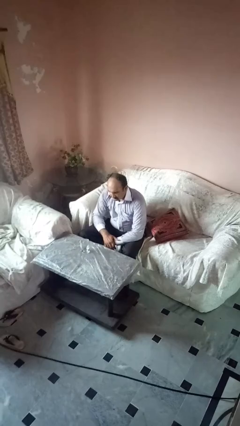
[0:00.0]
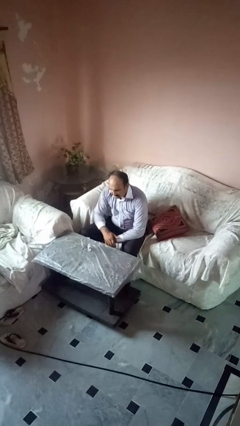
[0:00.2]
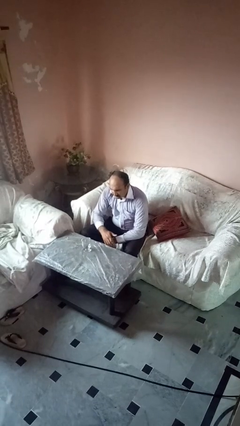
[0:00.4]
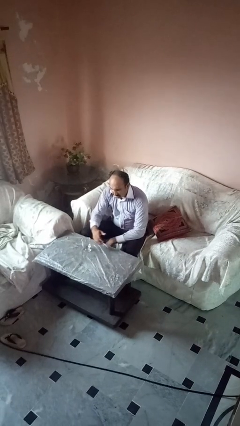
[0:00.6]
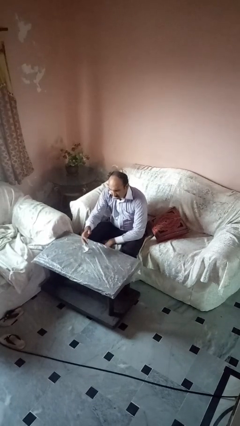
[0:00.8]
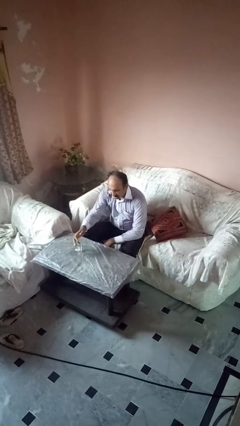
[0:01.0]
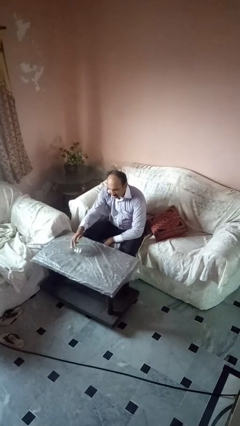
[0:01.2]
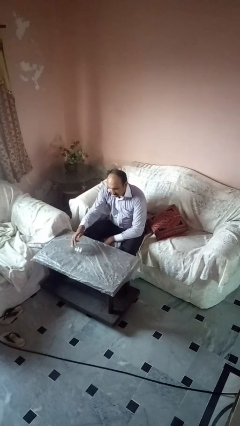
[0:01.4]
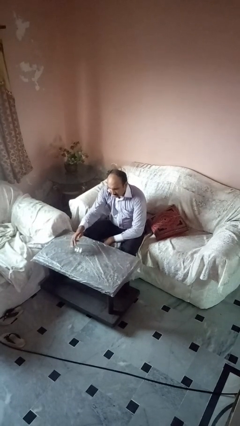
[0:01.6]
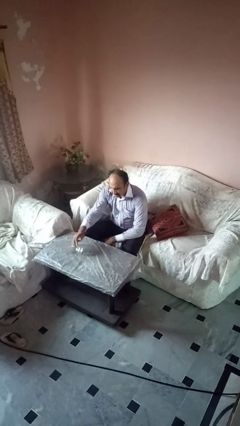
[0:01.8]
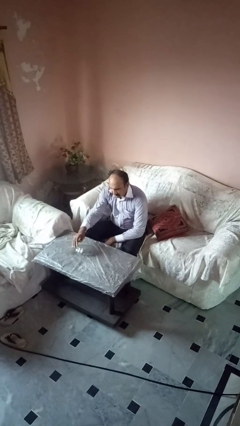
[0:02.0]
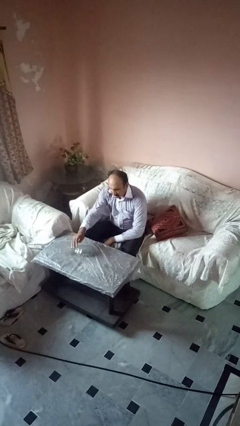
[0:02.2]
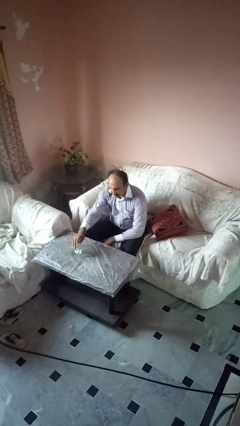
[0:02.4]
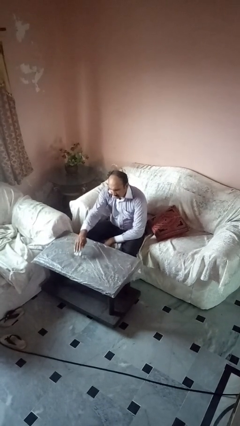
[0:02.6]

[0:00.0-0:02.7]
person spills on table

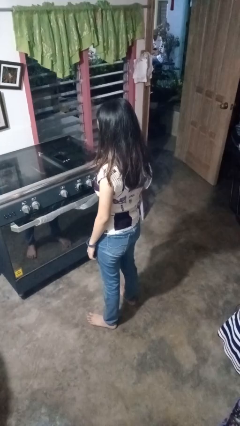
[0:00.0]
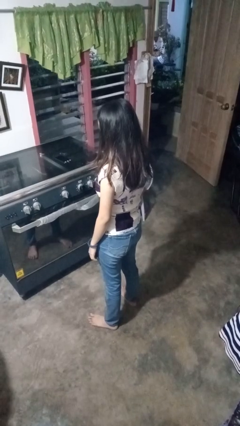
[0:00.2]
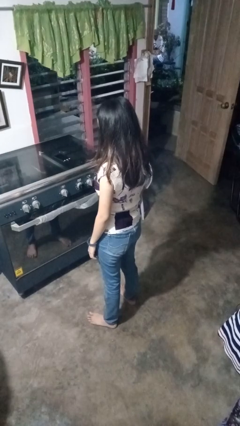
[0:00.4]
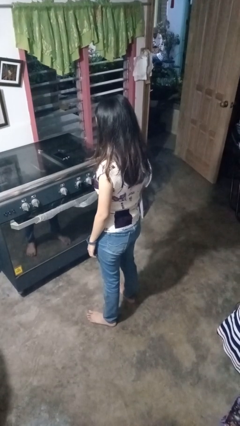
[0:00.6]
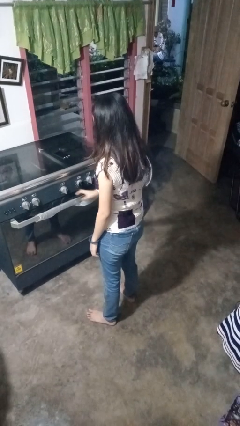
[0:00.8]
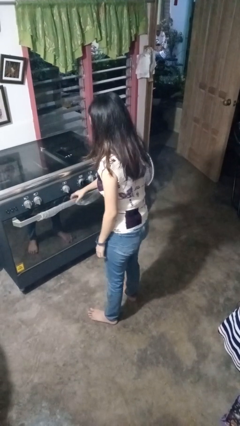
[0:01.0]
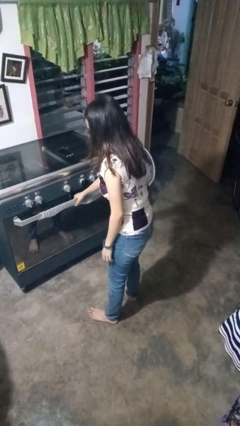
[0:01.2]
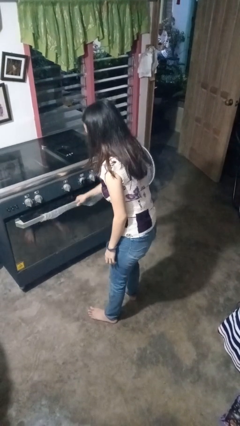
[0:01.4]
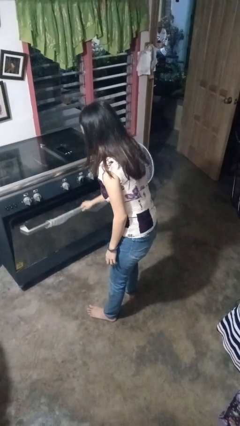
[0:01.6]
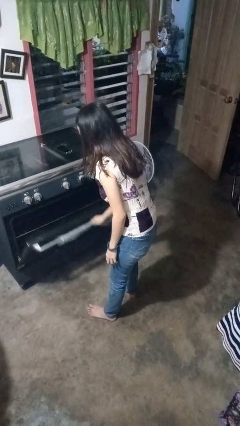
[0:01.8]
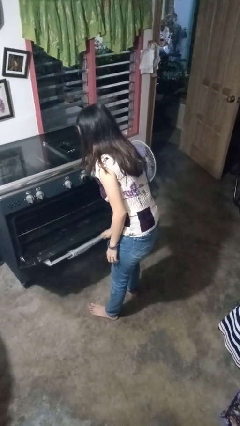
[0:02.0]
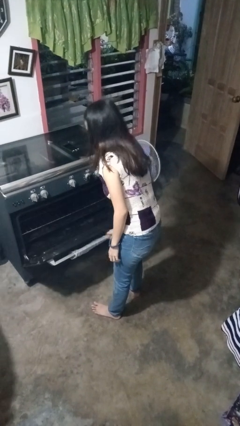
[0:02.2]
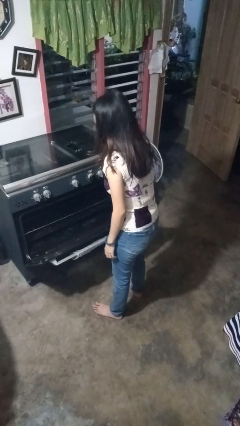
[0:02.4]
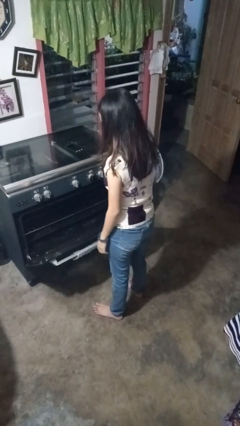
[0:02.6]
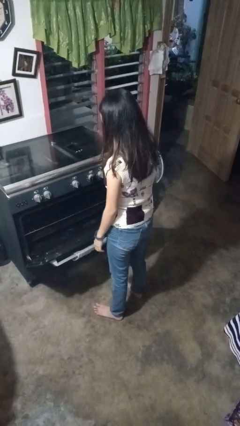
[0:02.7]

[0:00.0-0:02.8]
person opens oven door

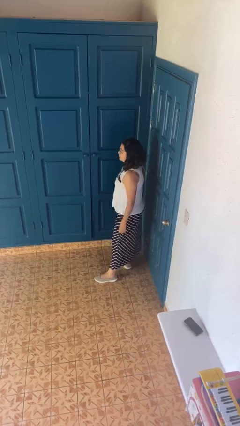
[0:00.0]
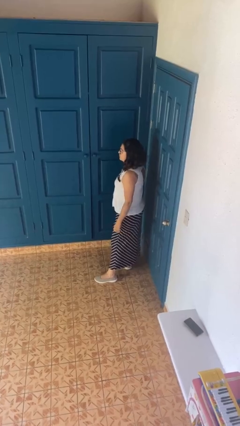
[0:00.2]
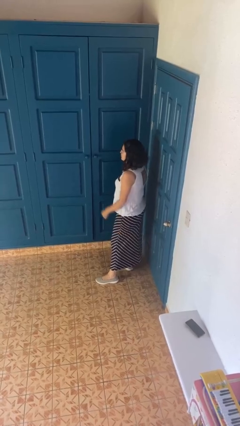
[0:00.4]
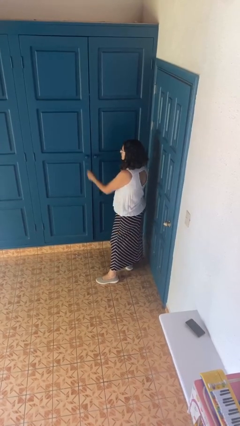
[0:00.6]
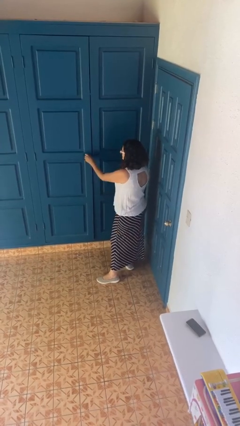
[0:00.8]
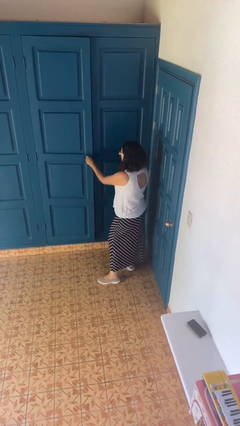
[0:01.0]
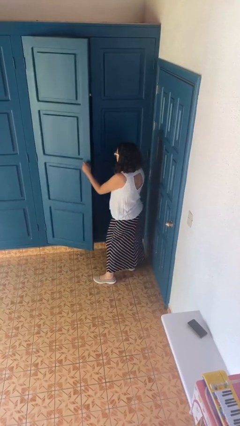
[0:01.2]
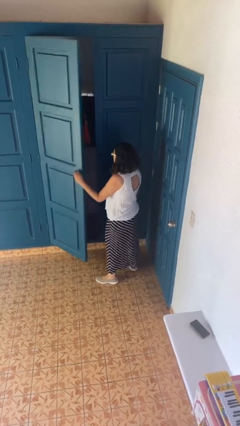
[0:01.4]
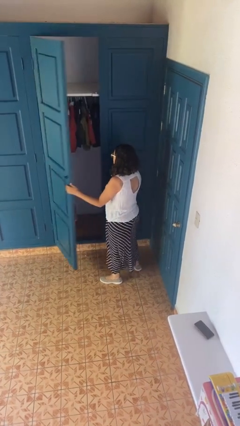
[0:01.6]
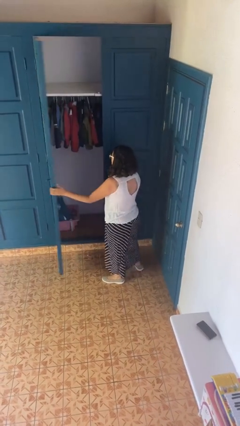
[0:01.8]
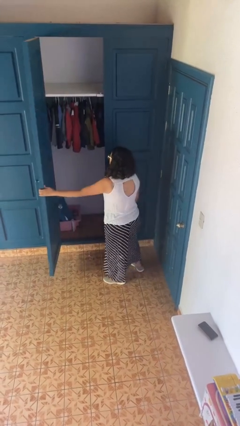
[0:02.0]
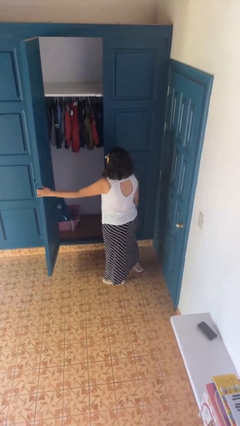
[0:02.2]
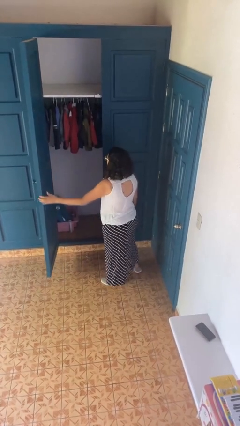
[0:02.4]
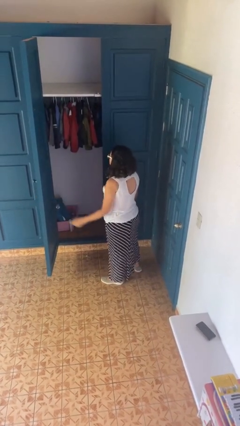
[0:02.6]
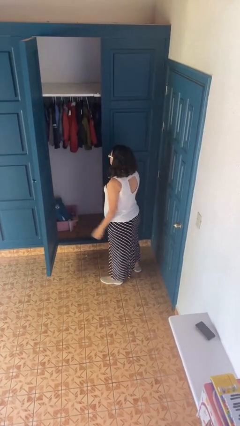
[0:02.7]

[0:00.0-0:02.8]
person opens closet door

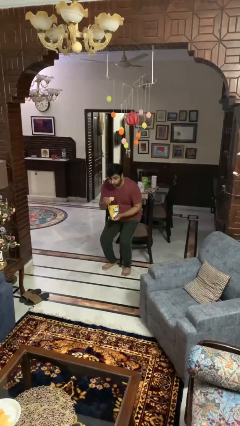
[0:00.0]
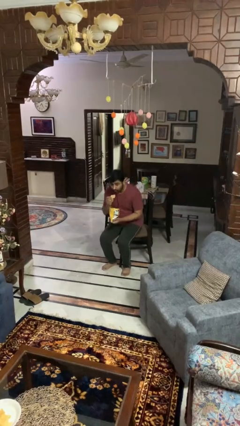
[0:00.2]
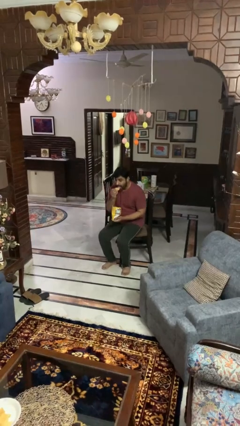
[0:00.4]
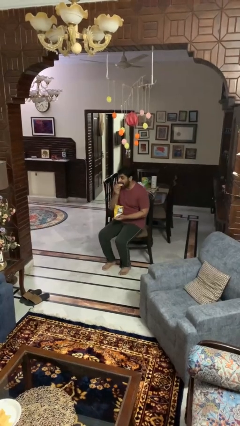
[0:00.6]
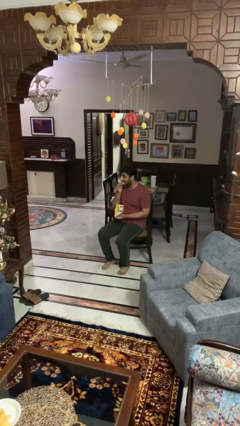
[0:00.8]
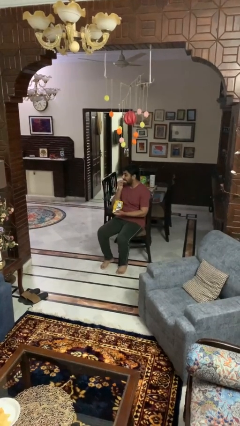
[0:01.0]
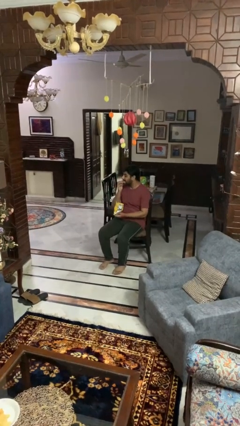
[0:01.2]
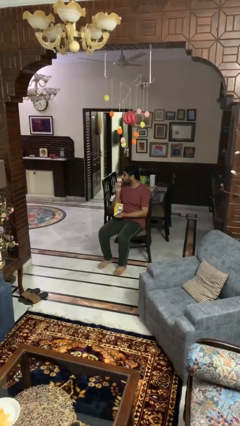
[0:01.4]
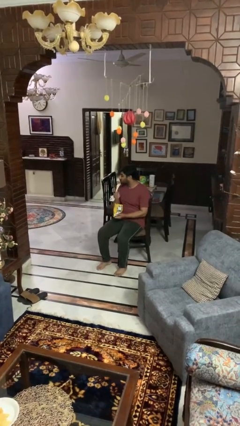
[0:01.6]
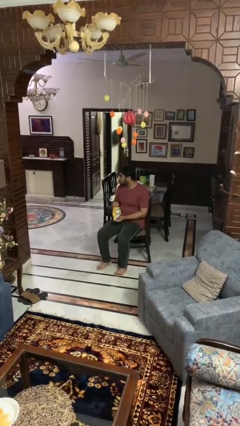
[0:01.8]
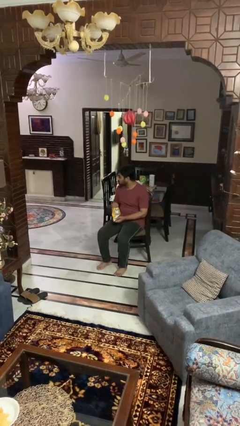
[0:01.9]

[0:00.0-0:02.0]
person eats snack from bag

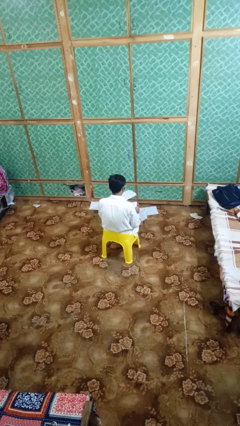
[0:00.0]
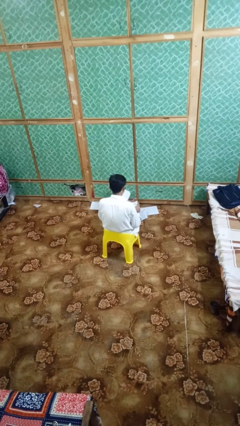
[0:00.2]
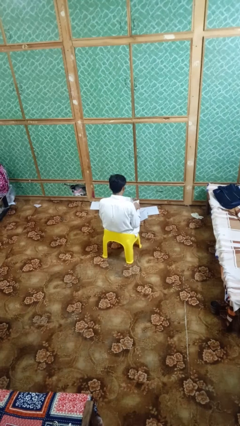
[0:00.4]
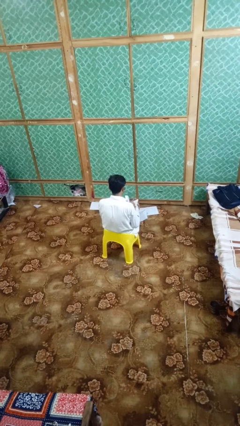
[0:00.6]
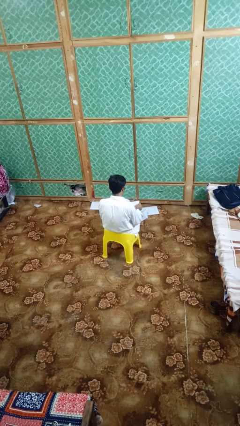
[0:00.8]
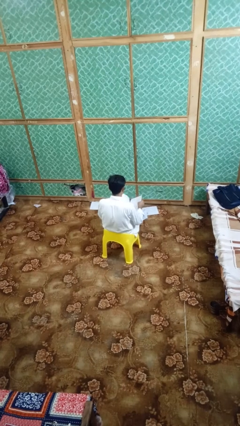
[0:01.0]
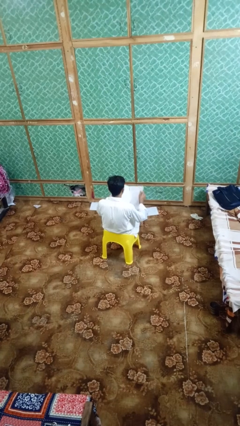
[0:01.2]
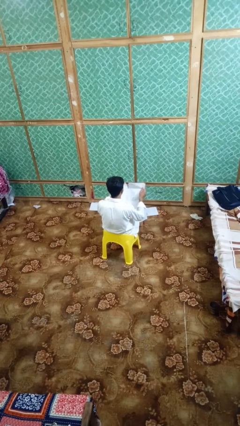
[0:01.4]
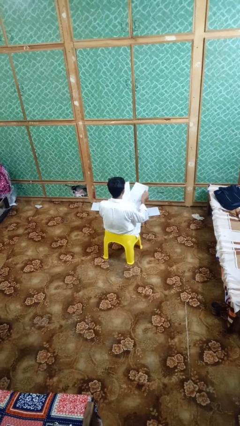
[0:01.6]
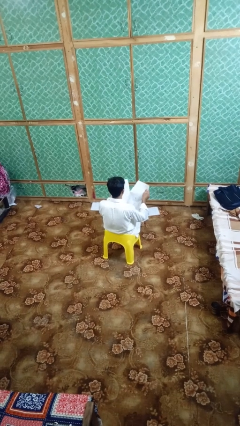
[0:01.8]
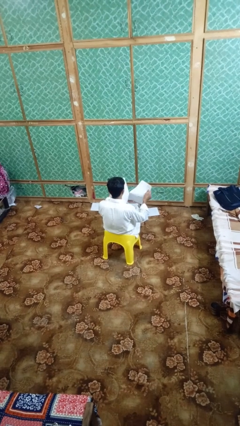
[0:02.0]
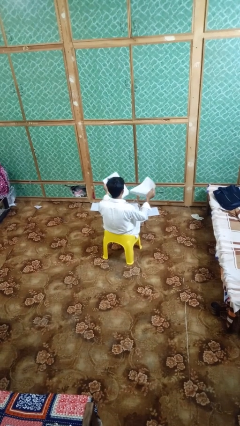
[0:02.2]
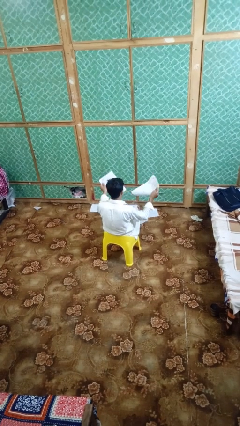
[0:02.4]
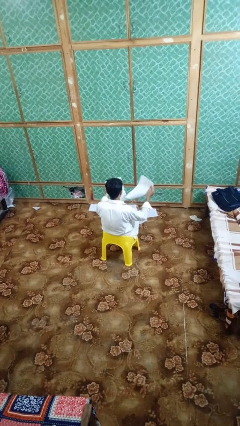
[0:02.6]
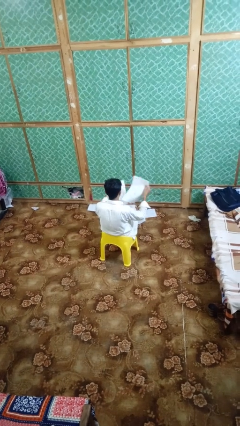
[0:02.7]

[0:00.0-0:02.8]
person tears paper

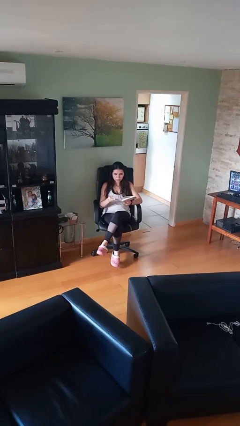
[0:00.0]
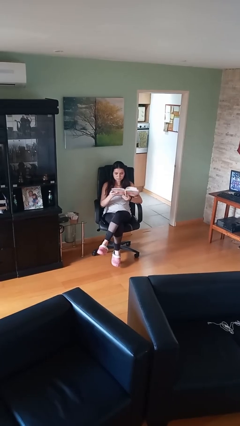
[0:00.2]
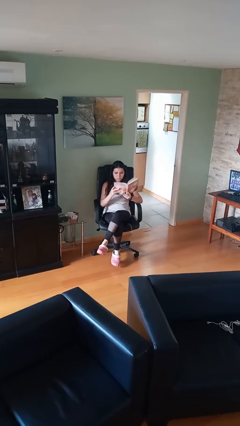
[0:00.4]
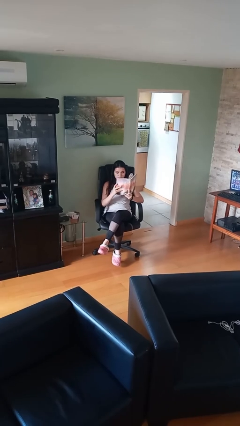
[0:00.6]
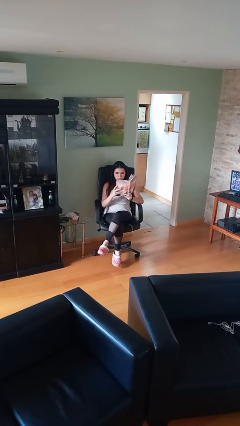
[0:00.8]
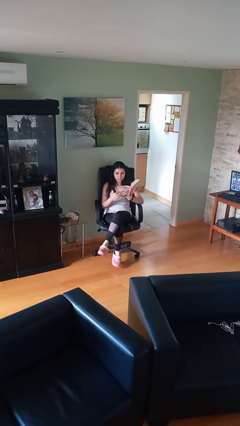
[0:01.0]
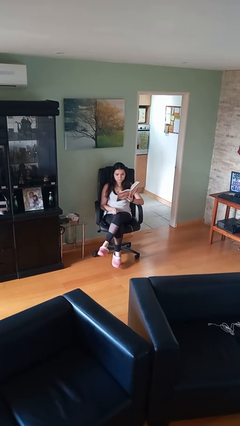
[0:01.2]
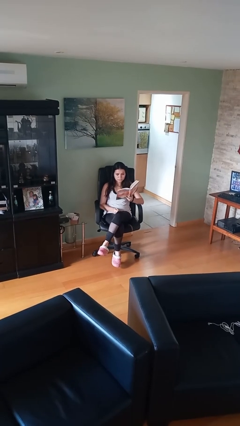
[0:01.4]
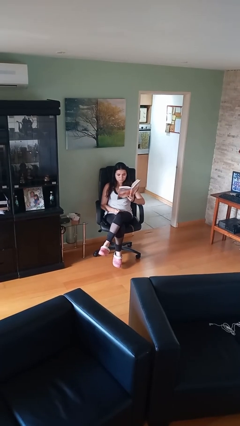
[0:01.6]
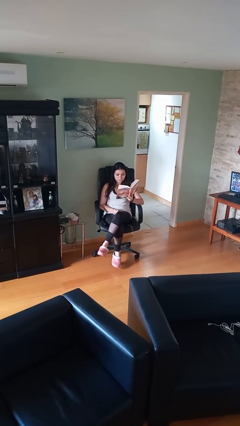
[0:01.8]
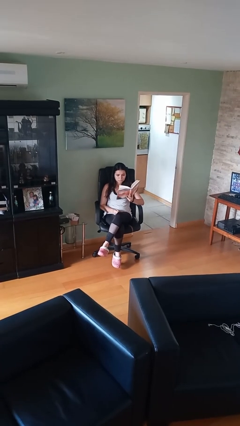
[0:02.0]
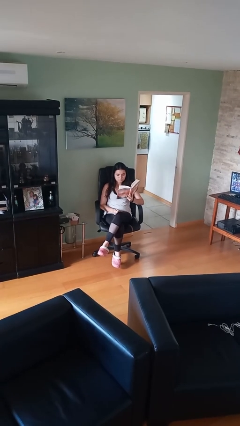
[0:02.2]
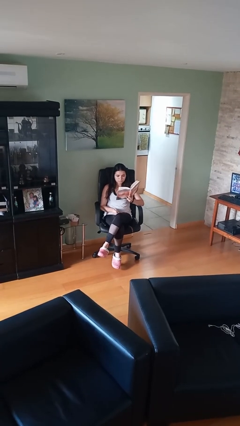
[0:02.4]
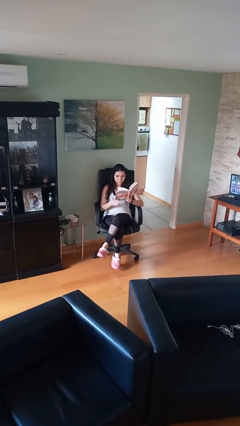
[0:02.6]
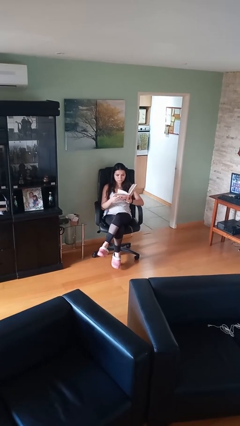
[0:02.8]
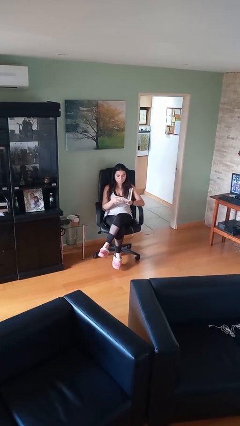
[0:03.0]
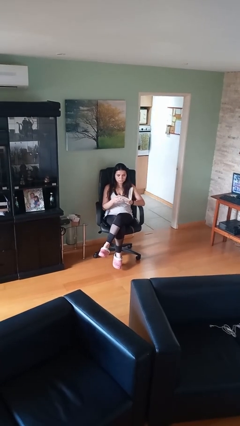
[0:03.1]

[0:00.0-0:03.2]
person reads document

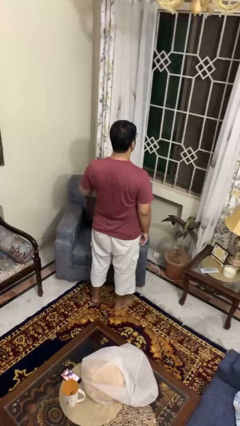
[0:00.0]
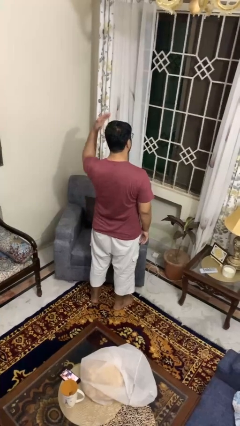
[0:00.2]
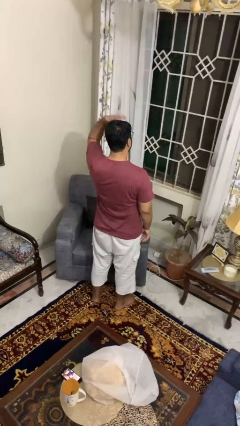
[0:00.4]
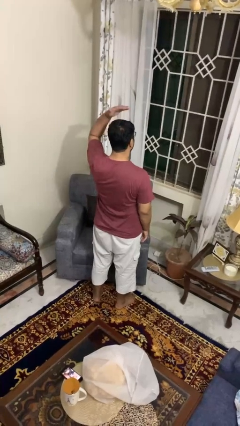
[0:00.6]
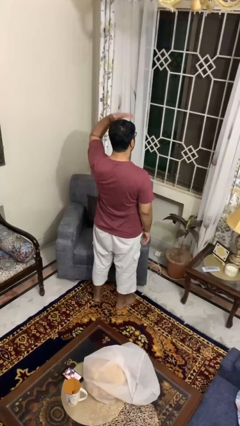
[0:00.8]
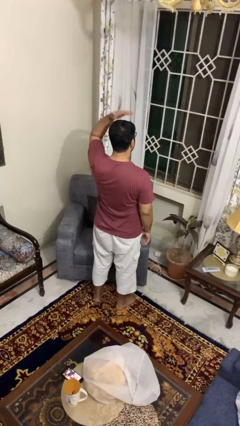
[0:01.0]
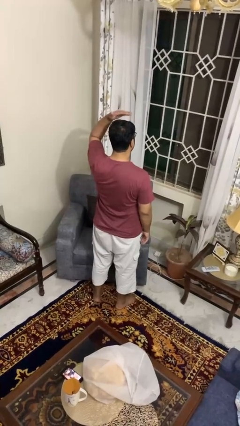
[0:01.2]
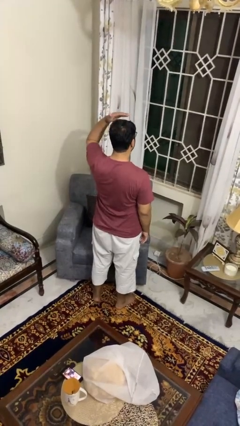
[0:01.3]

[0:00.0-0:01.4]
person pats head
